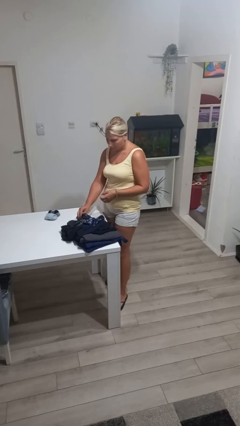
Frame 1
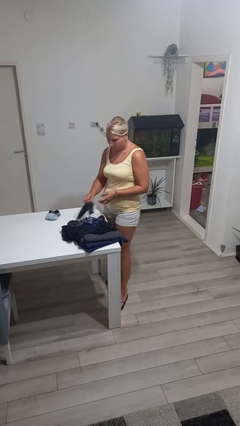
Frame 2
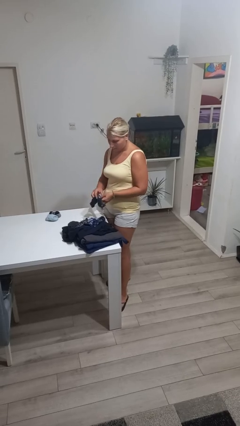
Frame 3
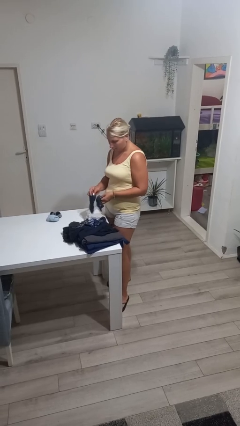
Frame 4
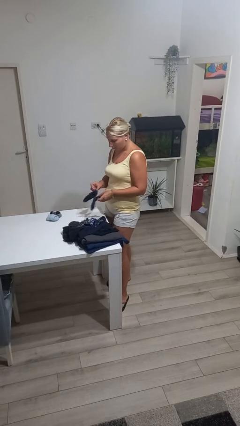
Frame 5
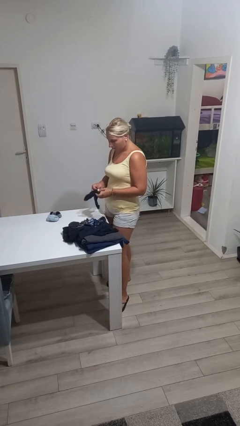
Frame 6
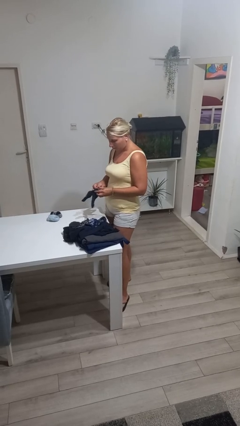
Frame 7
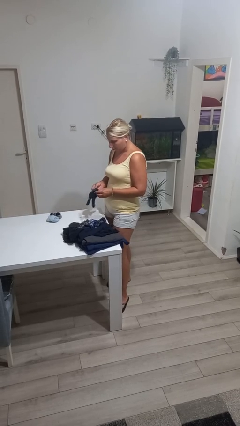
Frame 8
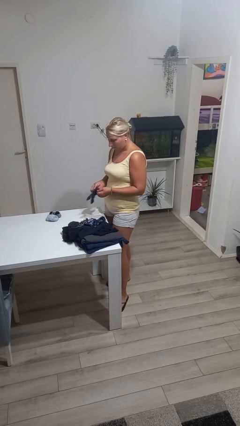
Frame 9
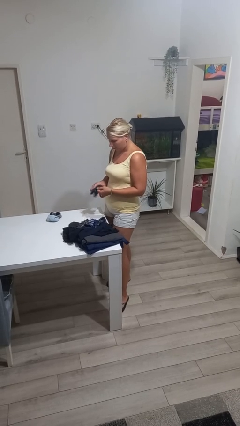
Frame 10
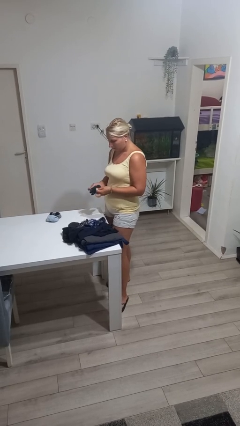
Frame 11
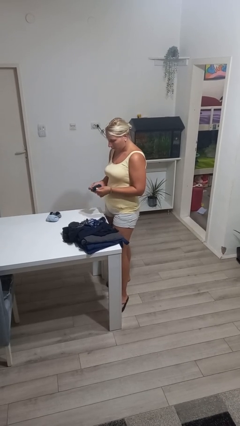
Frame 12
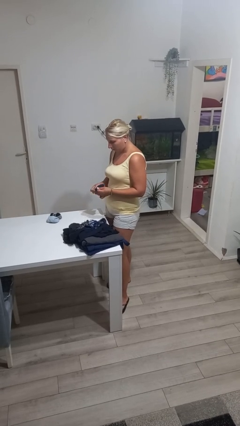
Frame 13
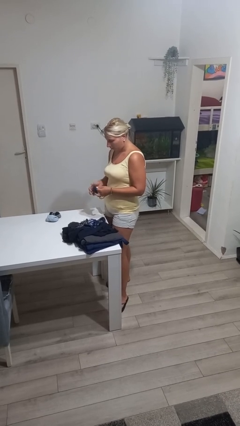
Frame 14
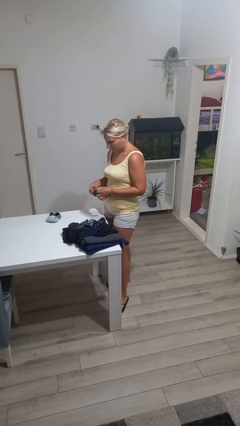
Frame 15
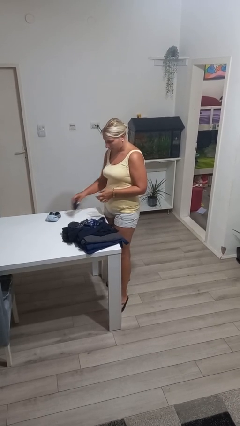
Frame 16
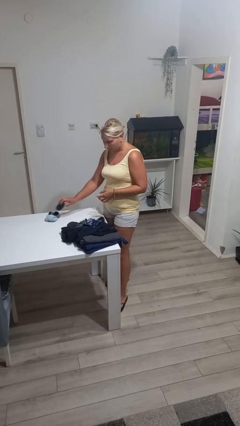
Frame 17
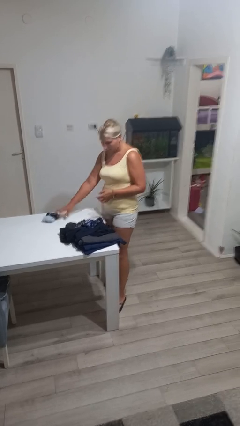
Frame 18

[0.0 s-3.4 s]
person folds socks

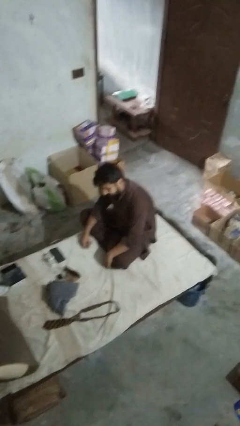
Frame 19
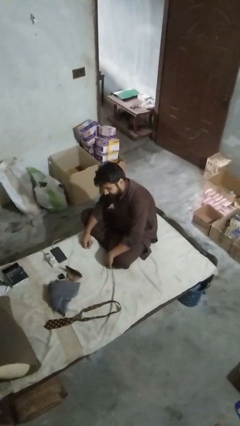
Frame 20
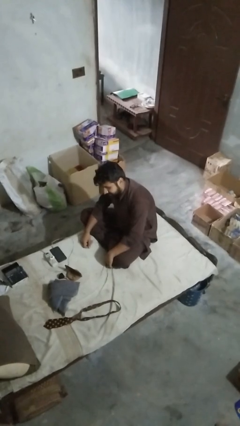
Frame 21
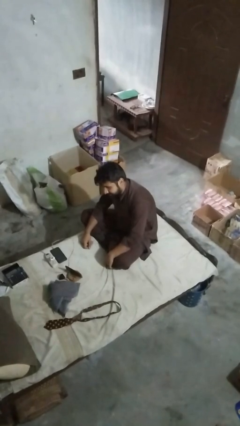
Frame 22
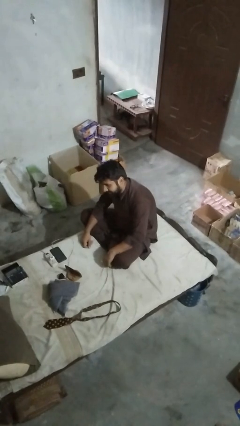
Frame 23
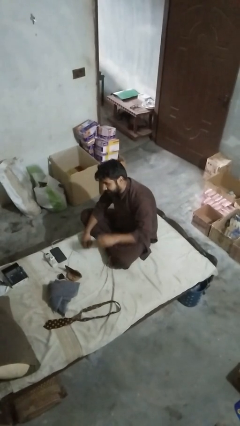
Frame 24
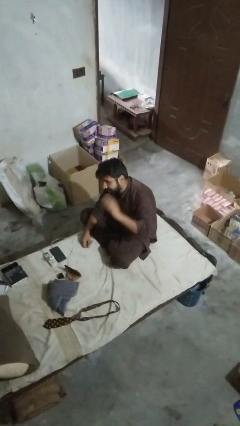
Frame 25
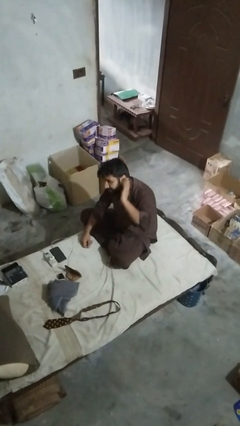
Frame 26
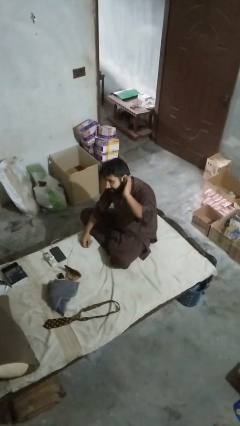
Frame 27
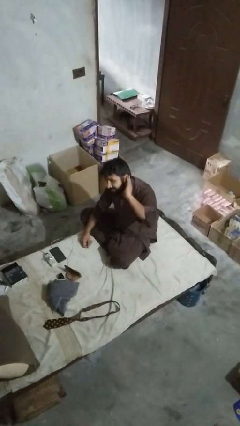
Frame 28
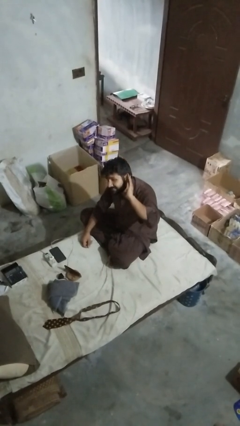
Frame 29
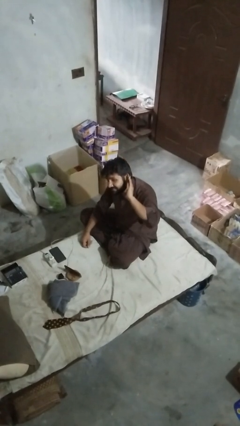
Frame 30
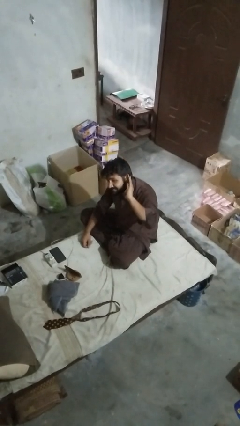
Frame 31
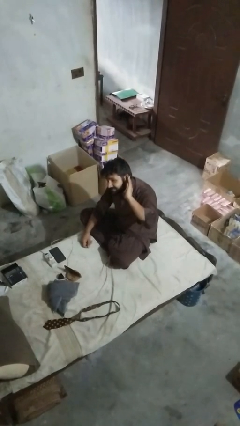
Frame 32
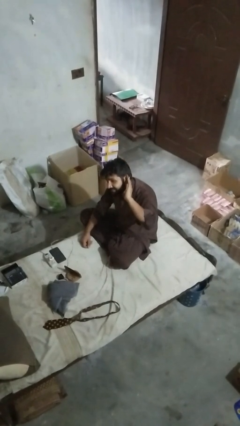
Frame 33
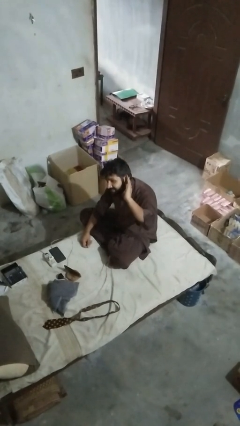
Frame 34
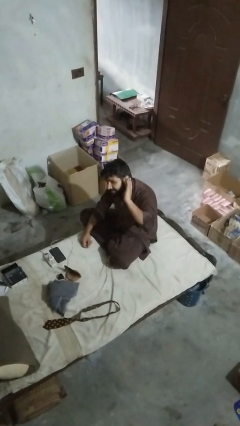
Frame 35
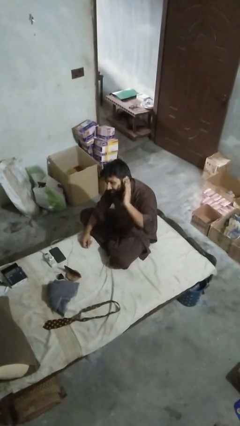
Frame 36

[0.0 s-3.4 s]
person gestures listen closely

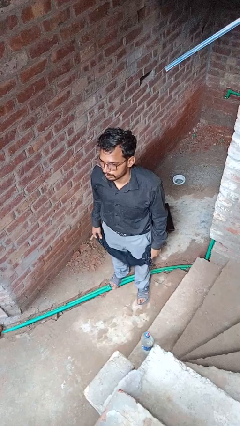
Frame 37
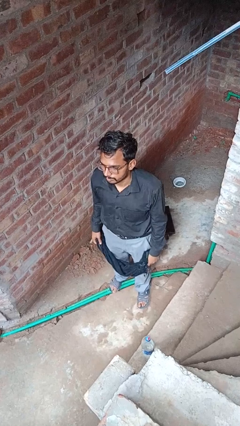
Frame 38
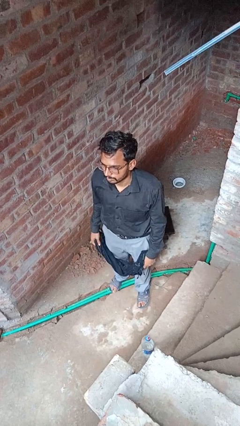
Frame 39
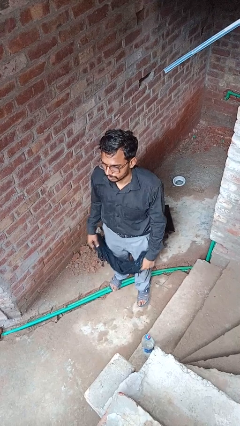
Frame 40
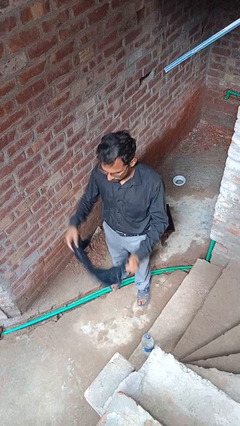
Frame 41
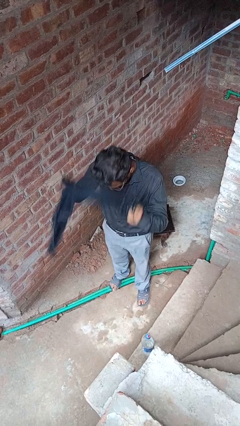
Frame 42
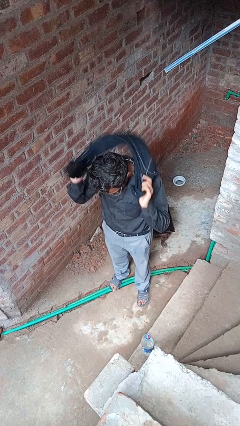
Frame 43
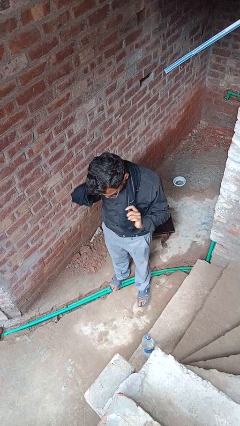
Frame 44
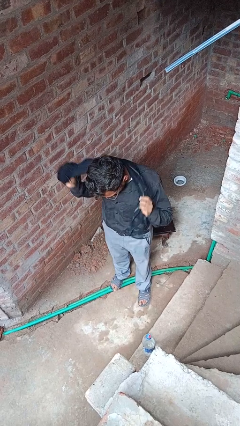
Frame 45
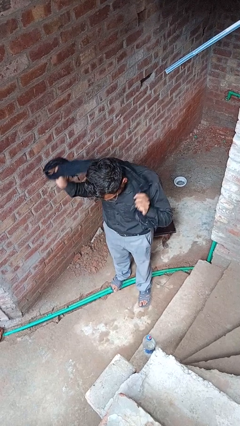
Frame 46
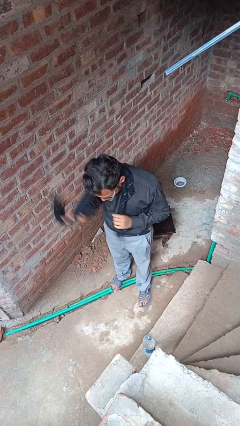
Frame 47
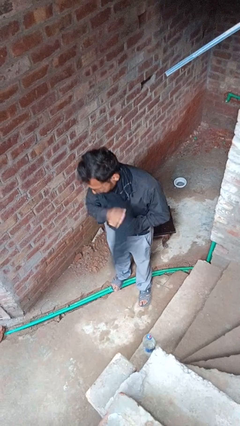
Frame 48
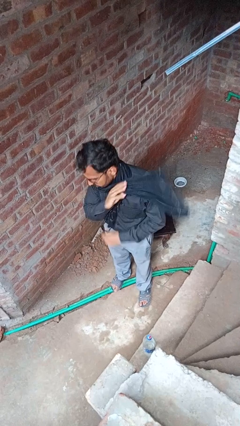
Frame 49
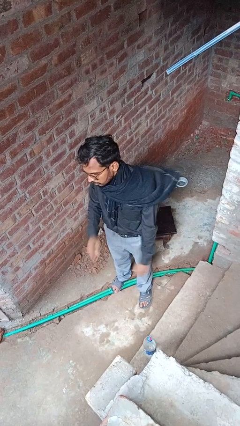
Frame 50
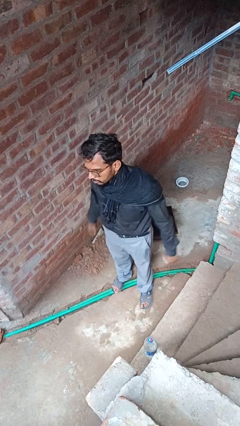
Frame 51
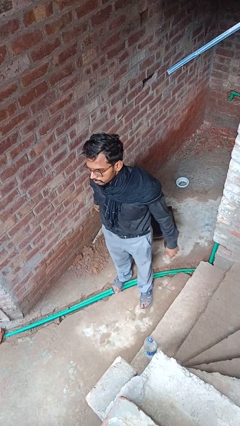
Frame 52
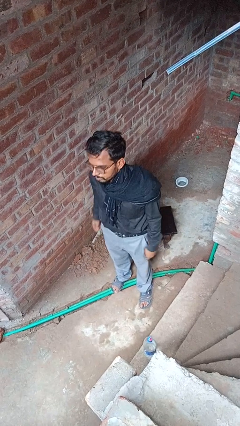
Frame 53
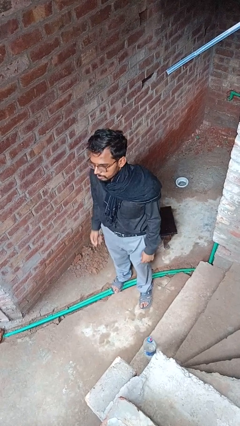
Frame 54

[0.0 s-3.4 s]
person puts on scarf

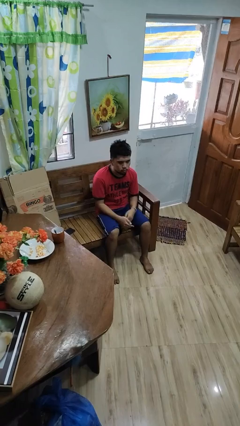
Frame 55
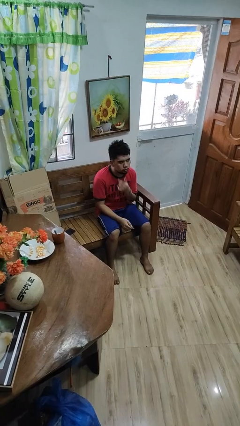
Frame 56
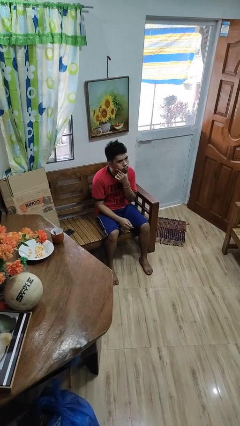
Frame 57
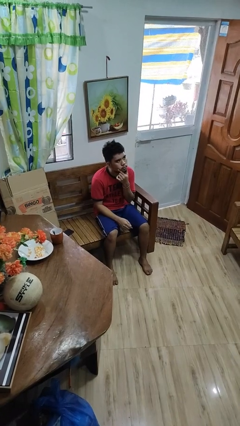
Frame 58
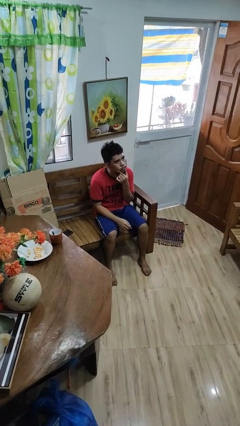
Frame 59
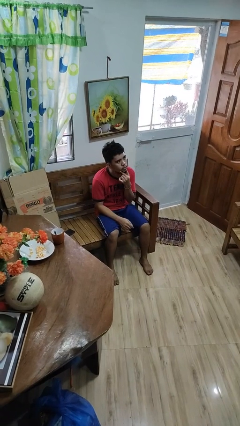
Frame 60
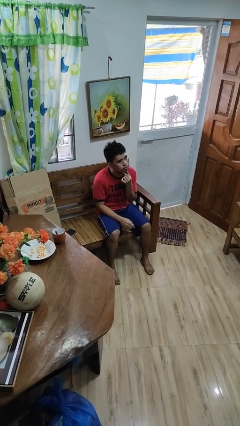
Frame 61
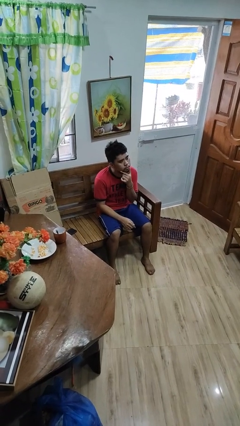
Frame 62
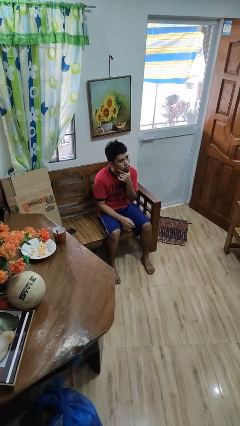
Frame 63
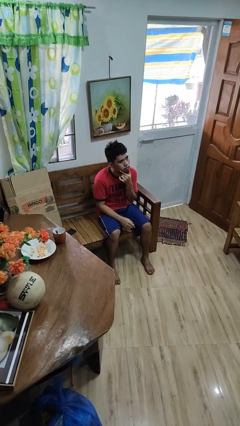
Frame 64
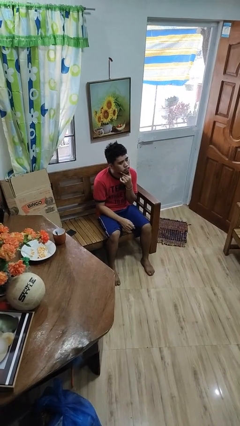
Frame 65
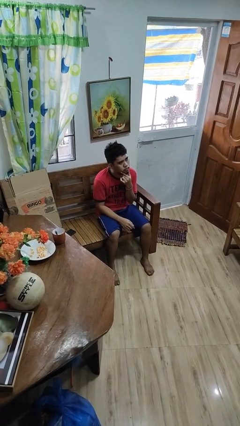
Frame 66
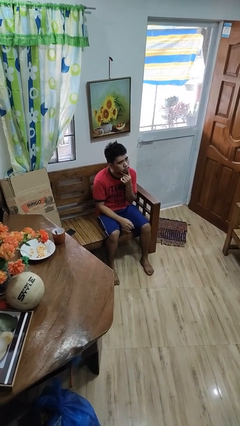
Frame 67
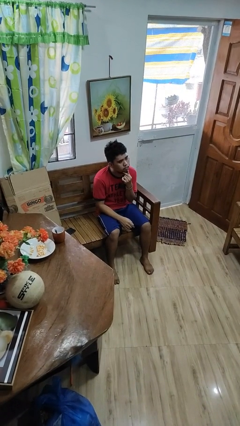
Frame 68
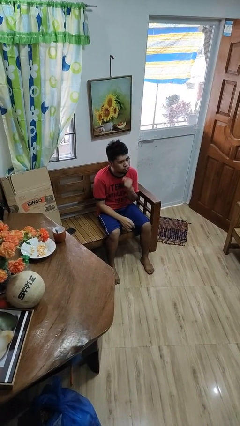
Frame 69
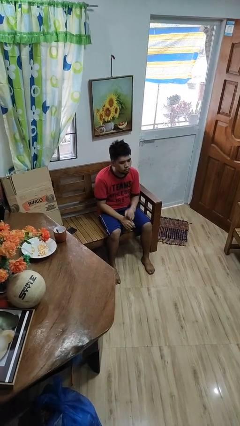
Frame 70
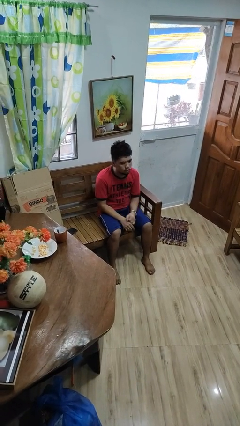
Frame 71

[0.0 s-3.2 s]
person strokes chin

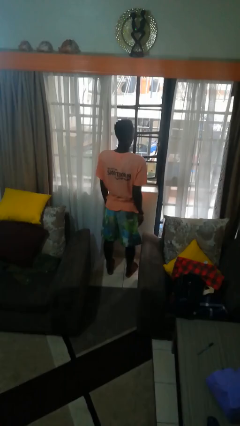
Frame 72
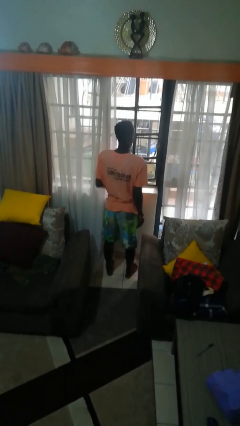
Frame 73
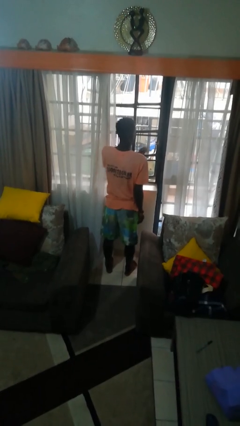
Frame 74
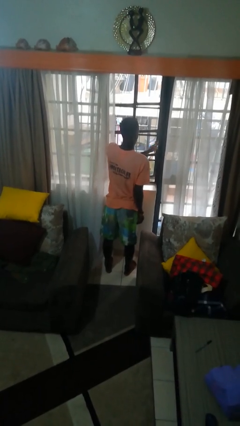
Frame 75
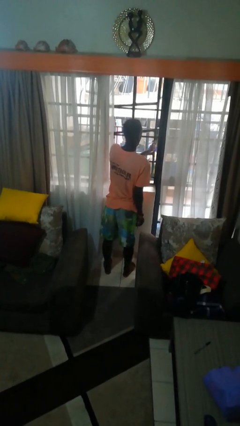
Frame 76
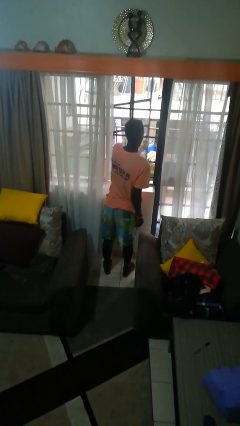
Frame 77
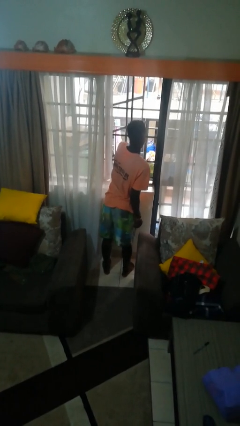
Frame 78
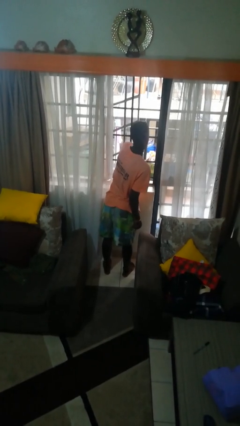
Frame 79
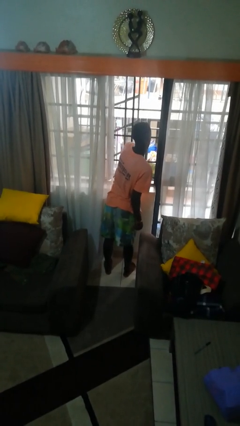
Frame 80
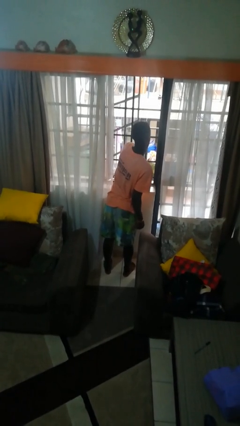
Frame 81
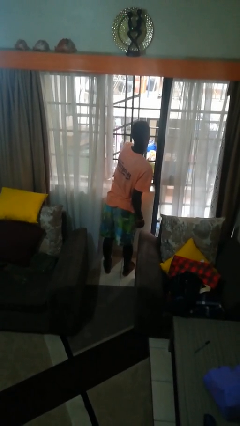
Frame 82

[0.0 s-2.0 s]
person opens home window

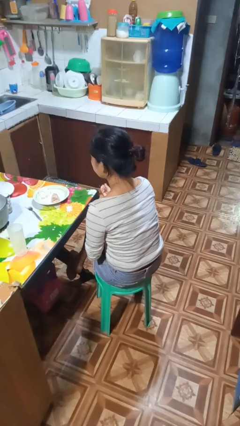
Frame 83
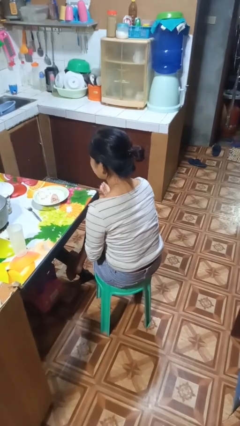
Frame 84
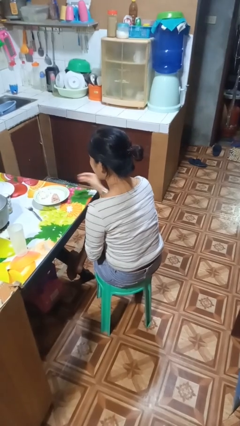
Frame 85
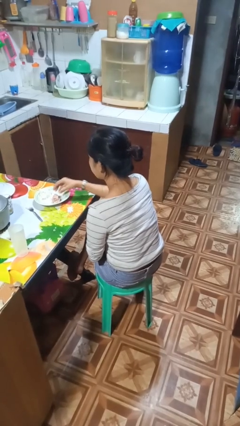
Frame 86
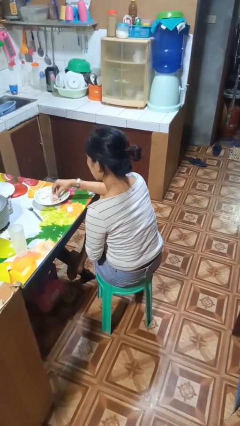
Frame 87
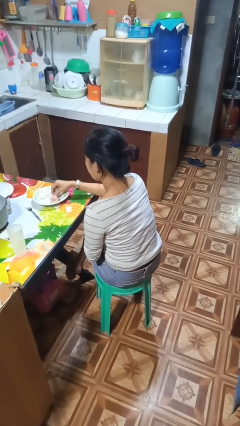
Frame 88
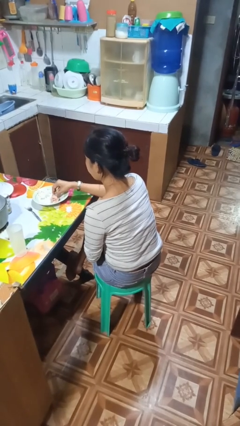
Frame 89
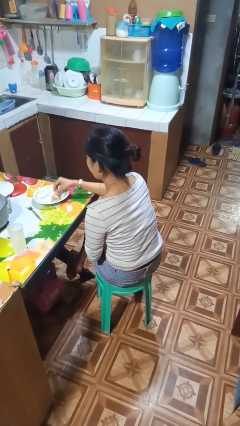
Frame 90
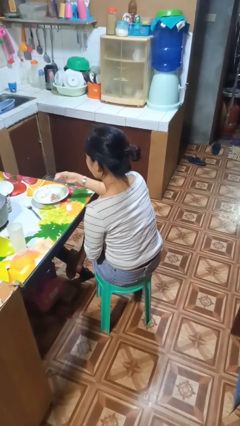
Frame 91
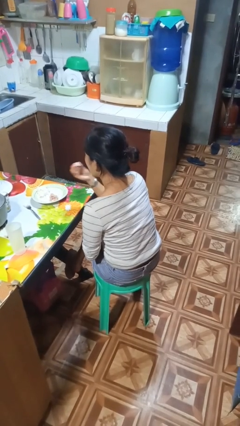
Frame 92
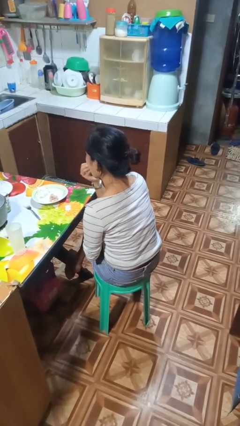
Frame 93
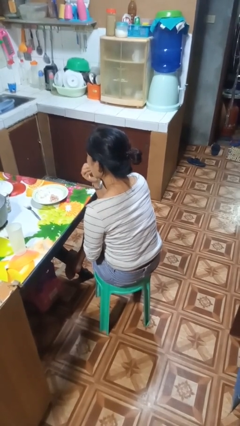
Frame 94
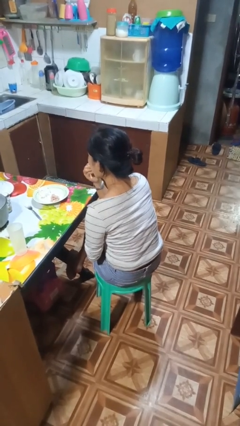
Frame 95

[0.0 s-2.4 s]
person eats with hands
